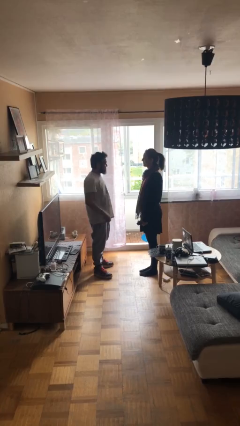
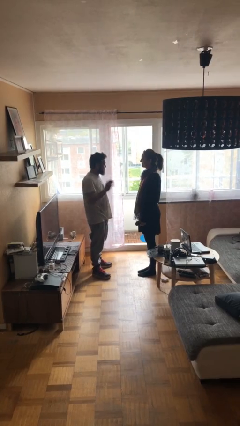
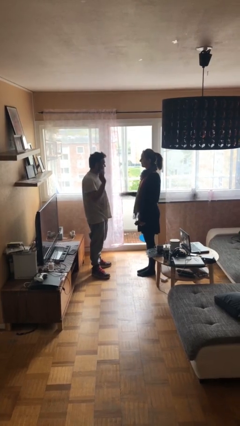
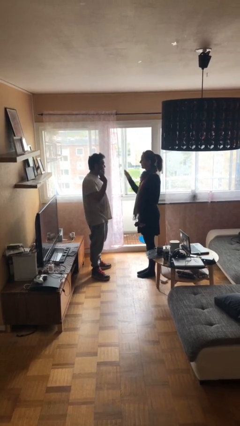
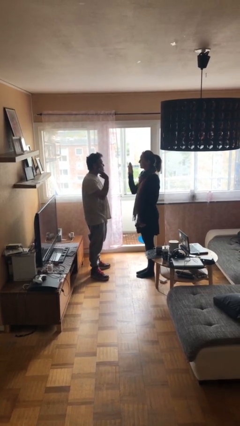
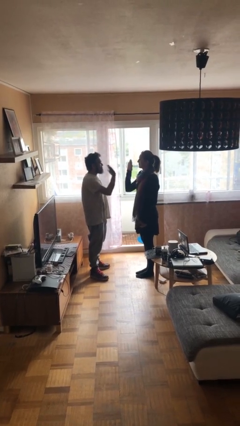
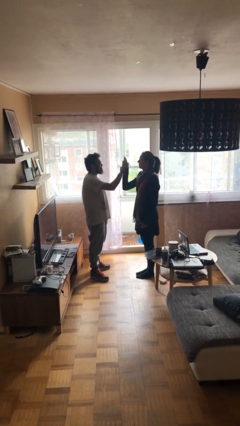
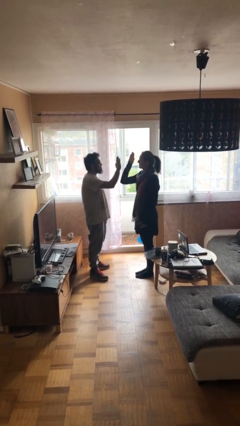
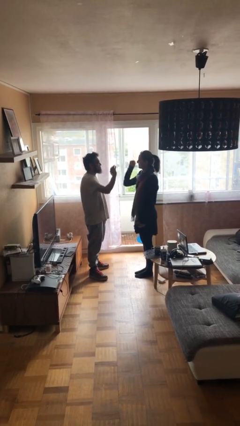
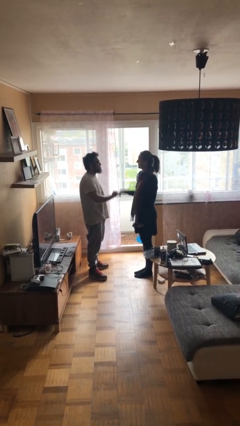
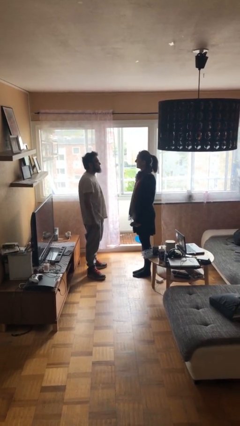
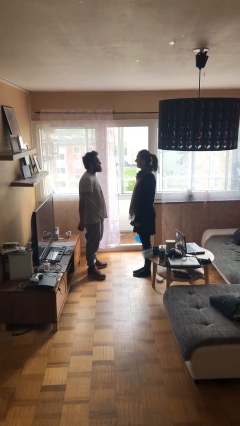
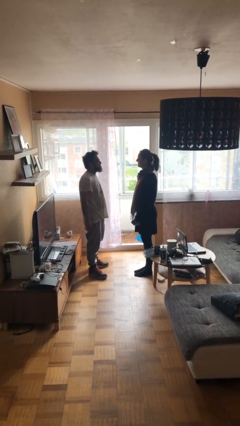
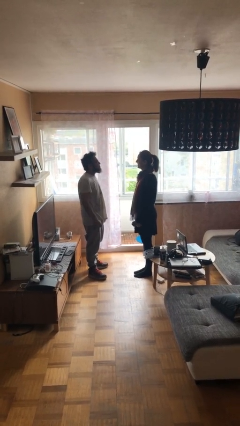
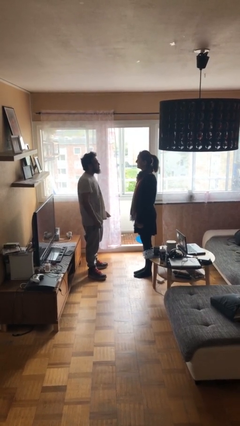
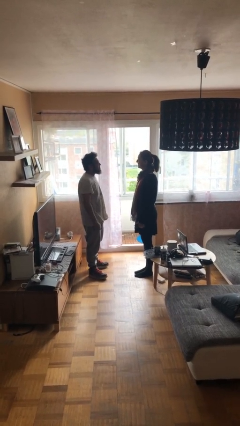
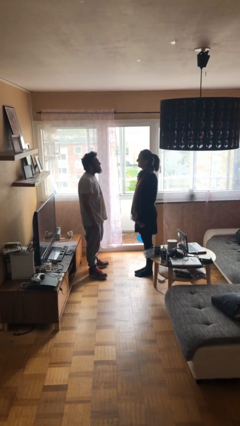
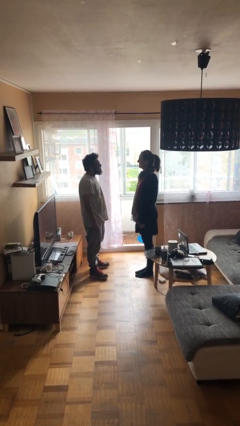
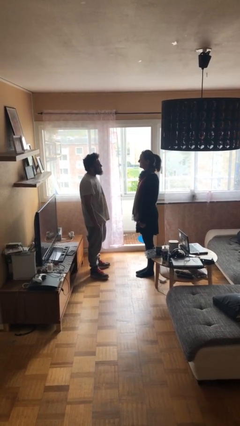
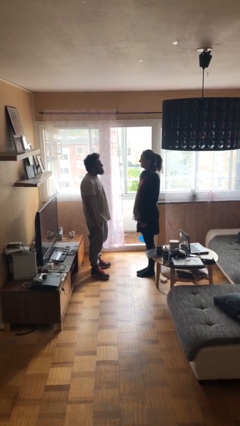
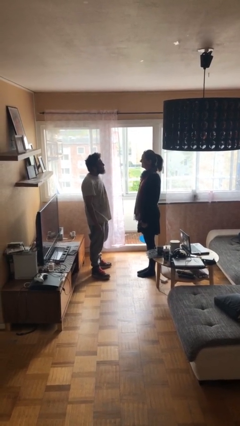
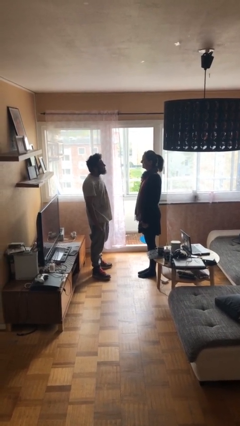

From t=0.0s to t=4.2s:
person highfives hand

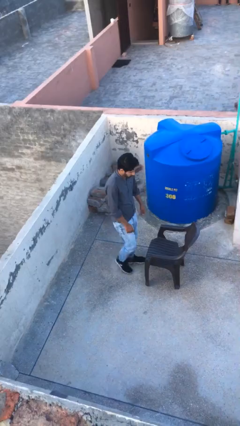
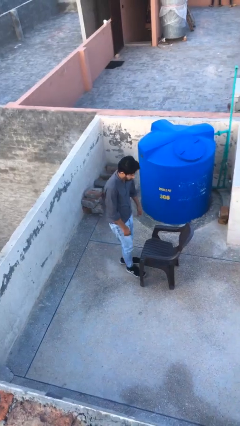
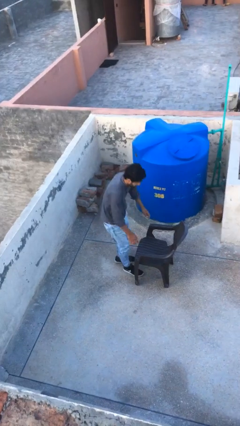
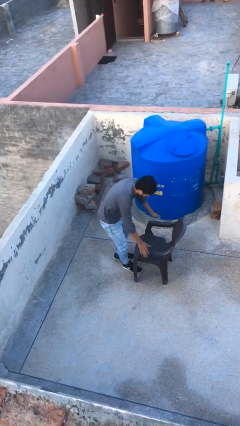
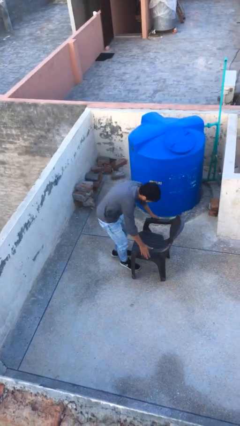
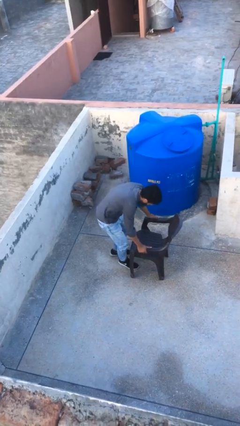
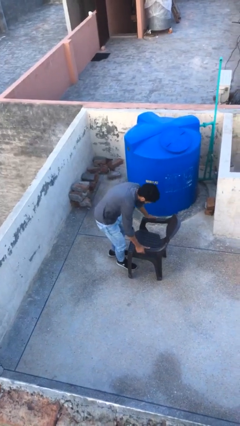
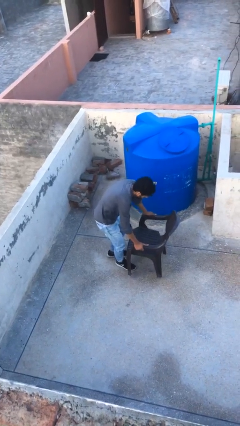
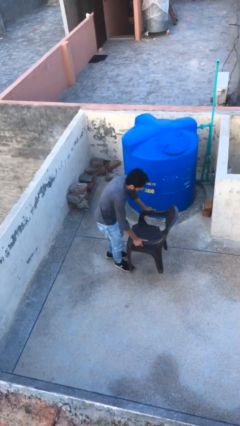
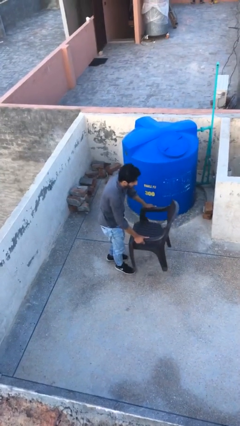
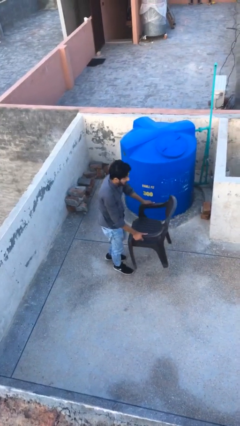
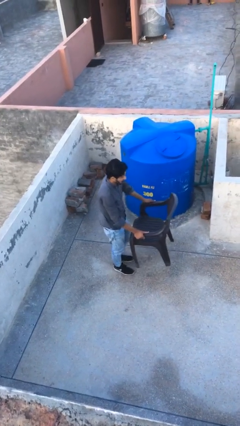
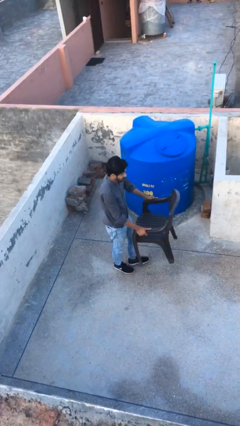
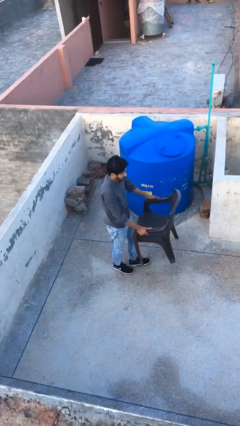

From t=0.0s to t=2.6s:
person picks up object from floor

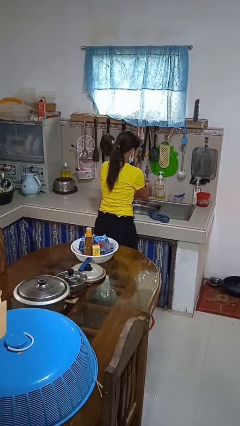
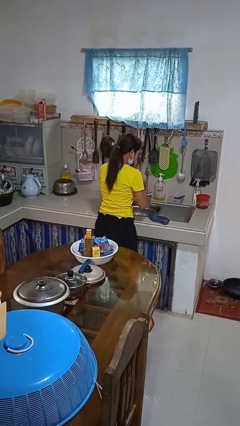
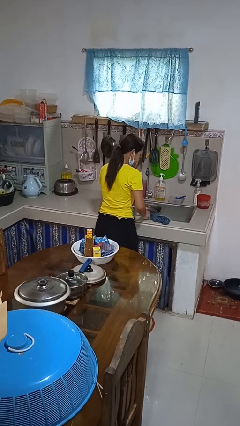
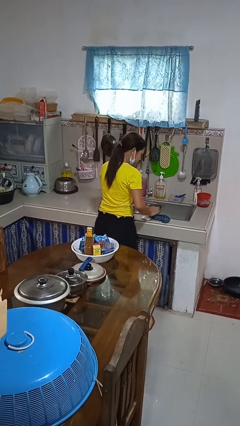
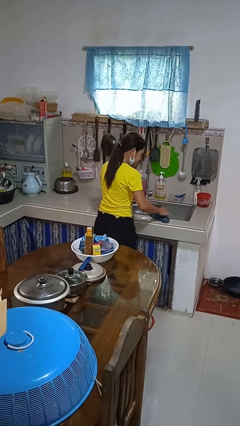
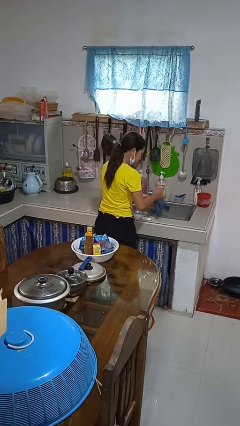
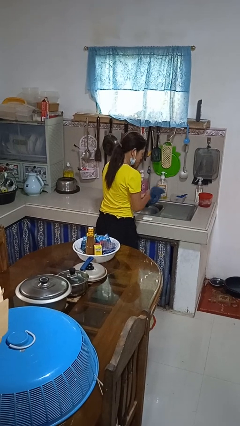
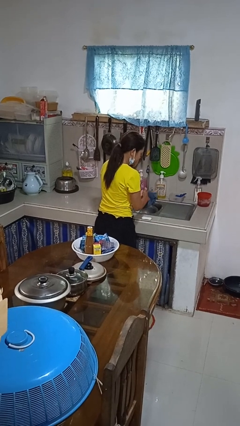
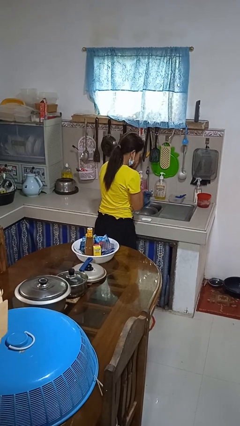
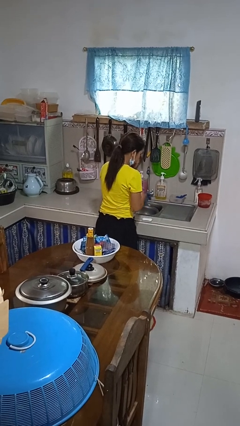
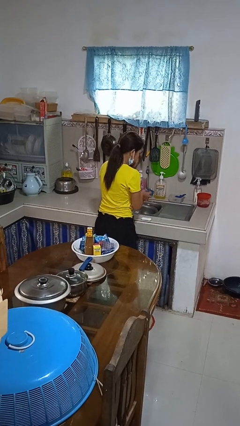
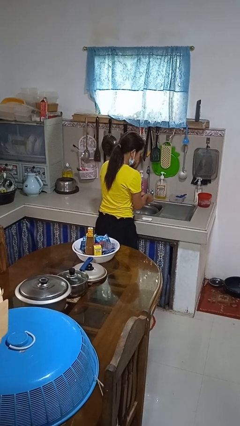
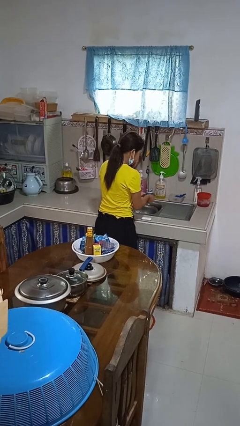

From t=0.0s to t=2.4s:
person dries hands with towel

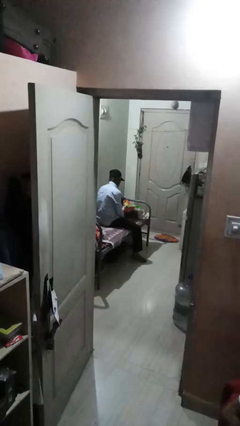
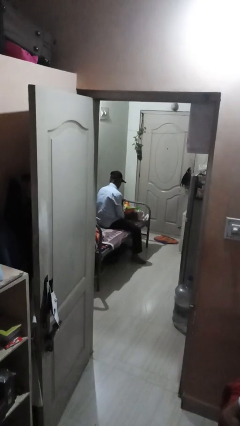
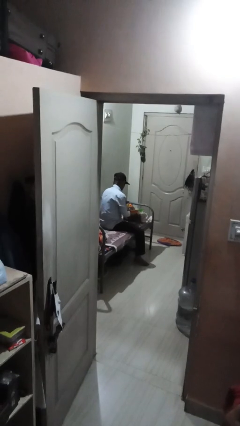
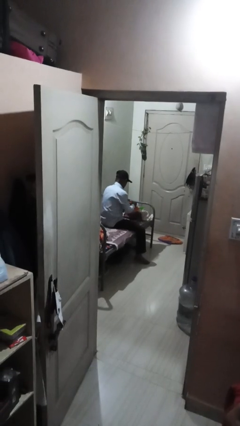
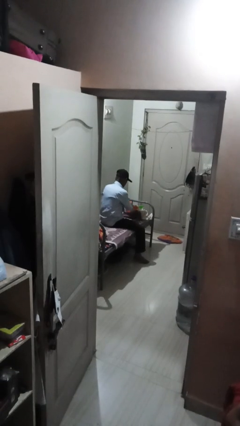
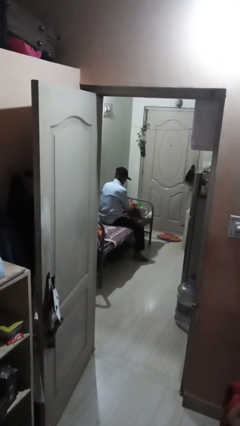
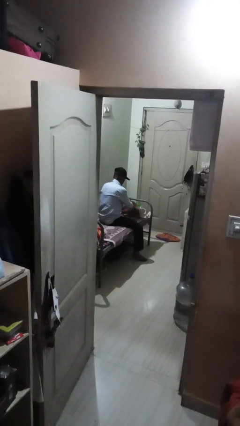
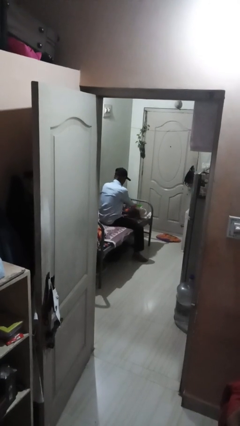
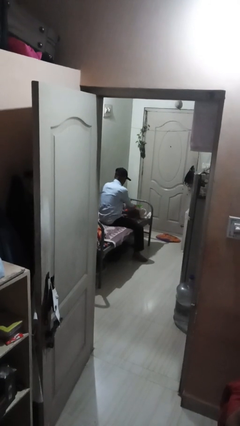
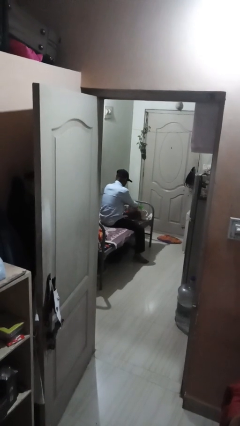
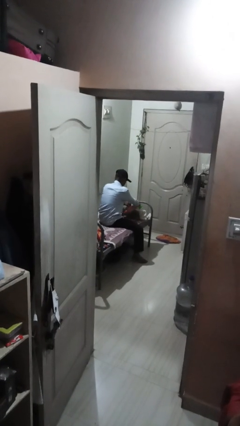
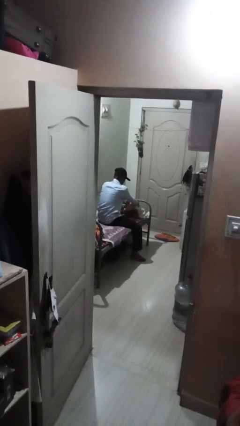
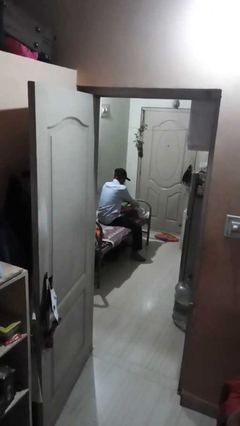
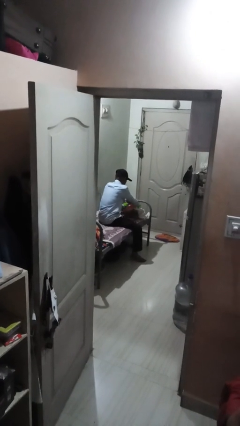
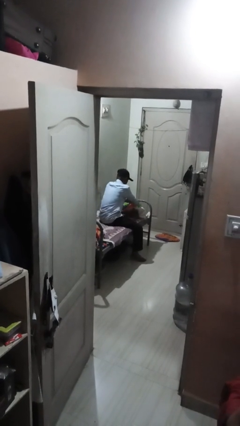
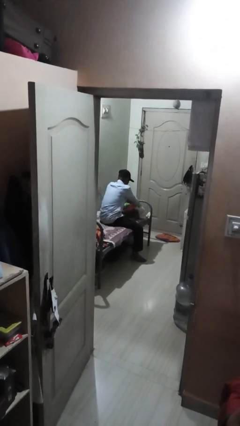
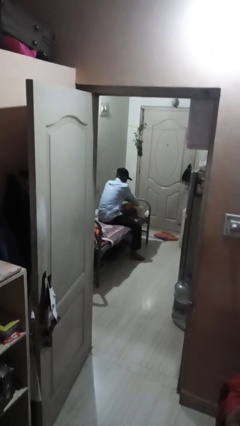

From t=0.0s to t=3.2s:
person searches in bag

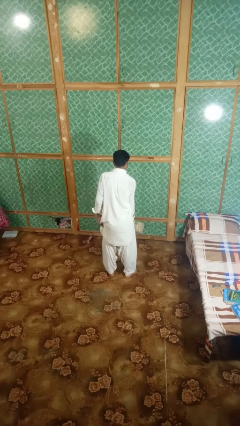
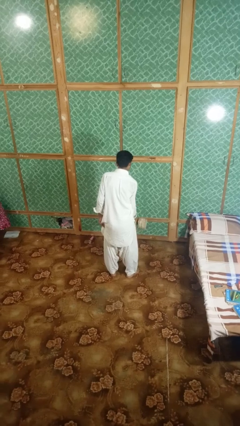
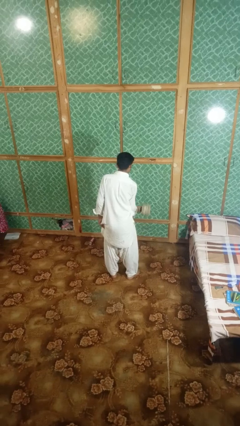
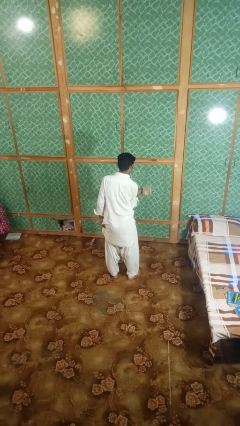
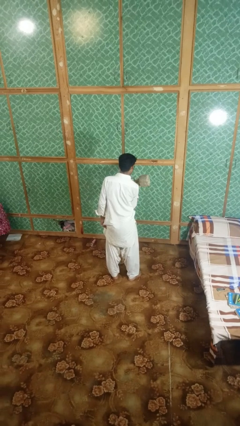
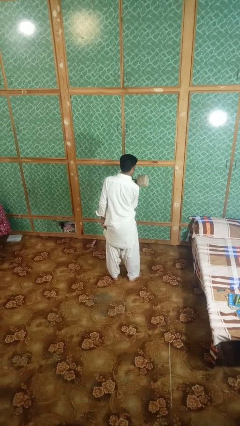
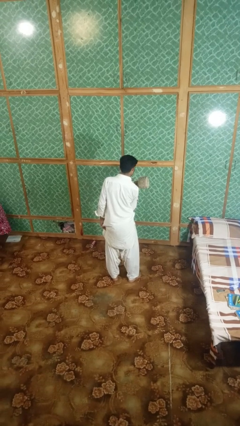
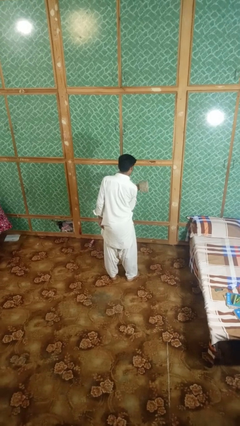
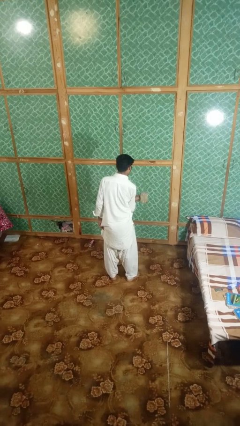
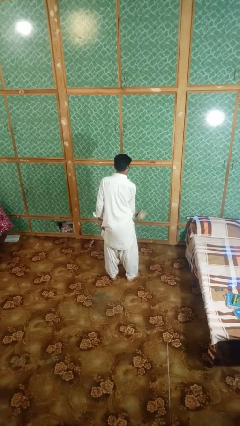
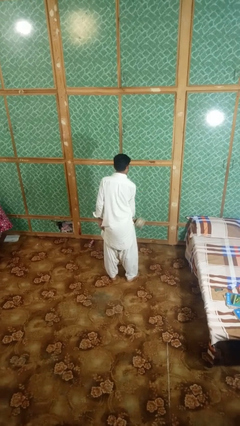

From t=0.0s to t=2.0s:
person lifts dumbbells

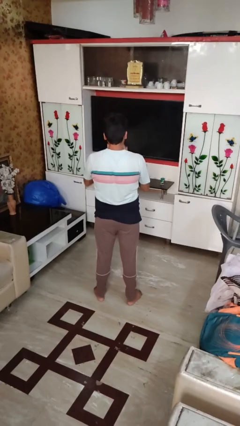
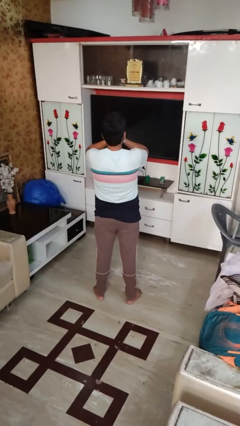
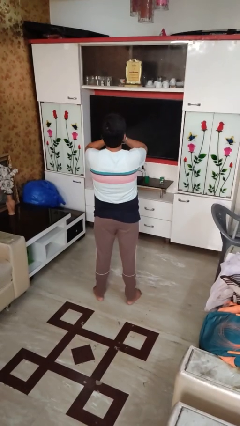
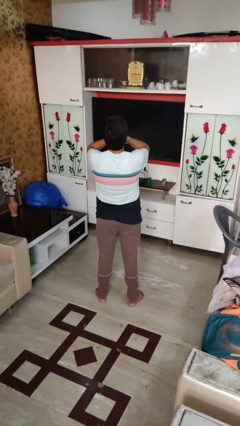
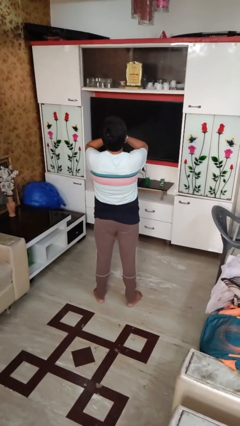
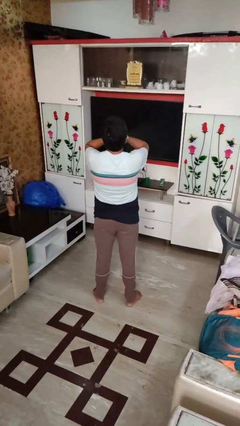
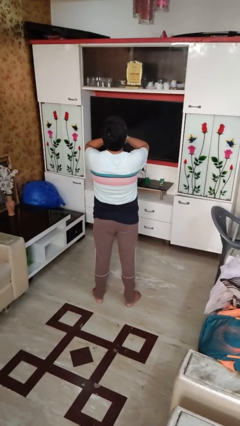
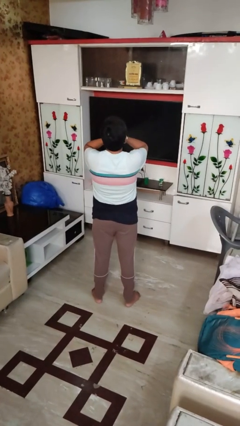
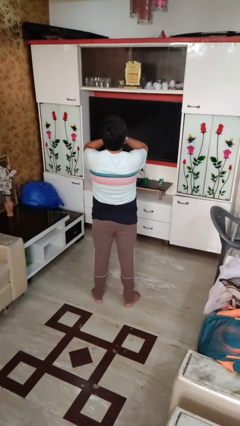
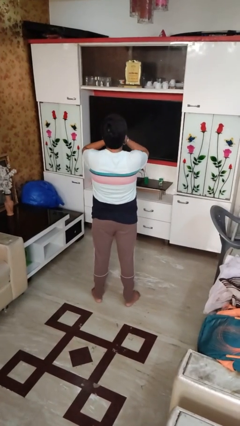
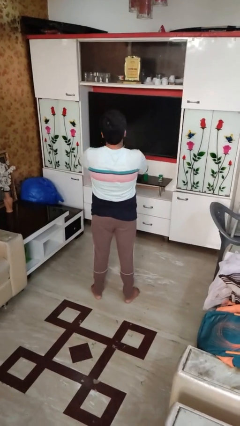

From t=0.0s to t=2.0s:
person covers face with hands

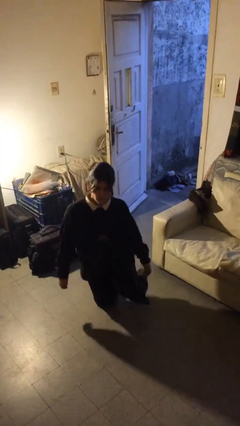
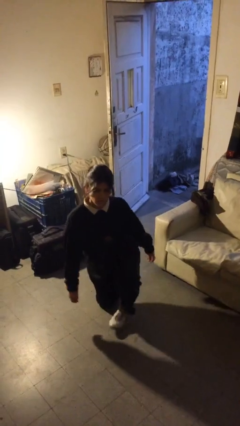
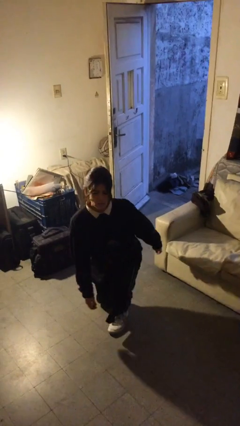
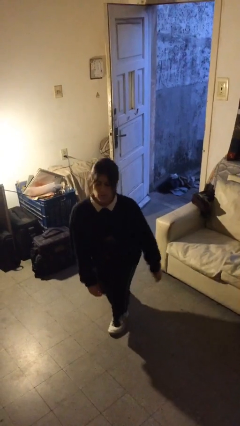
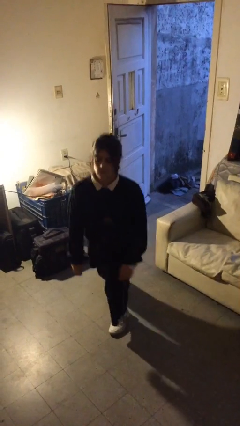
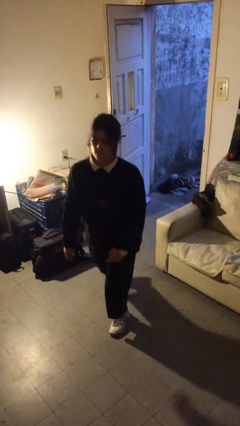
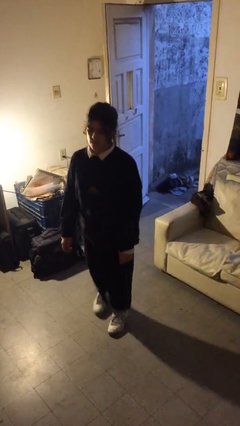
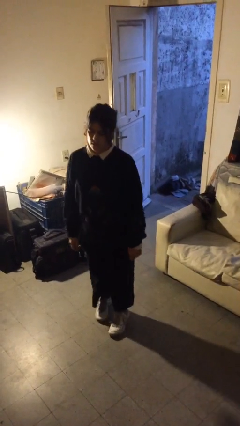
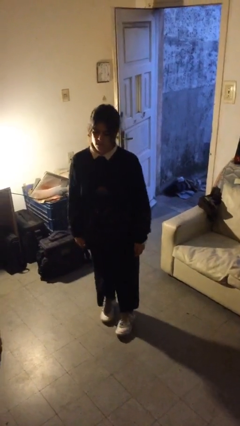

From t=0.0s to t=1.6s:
person stands up from floor
